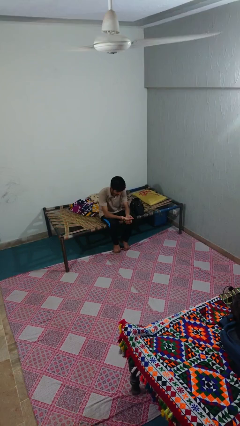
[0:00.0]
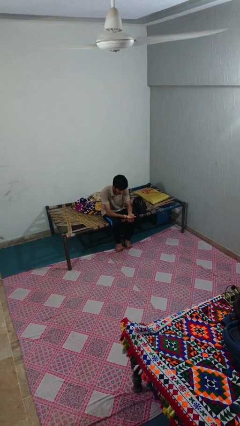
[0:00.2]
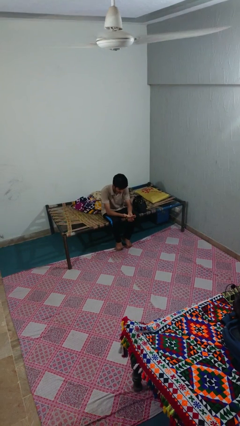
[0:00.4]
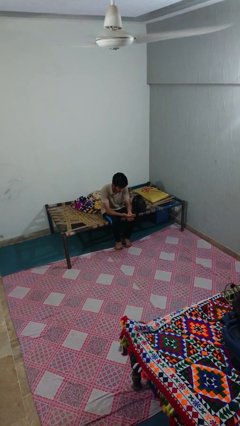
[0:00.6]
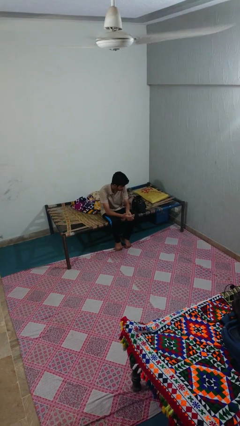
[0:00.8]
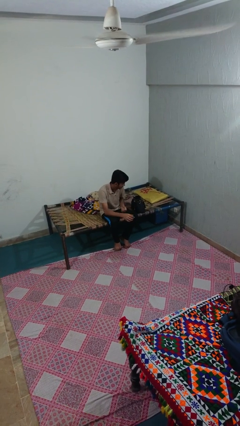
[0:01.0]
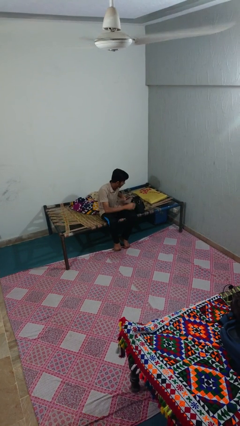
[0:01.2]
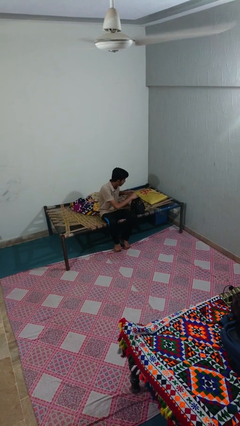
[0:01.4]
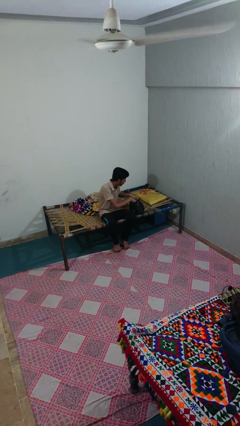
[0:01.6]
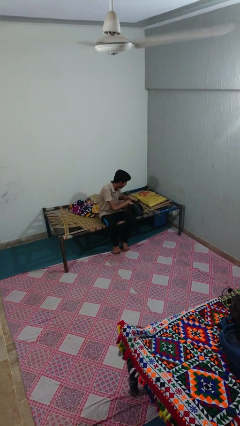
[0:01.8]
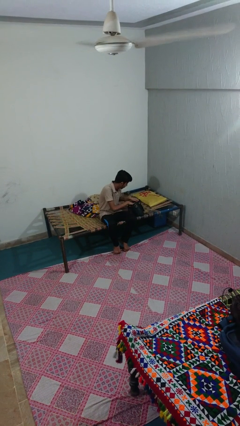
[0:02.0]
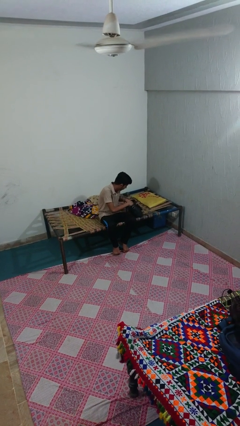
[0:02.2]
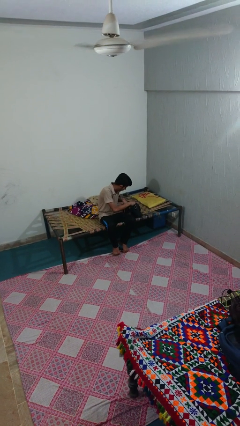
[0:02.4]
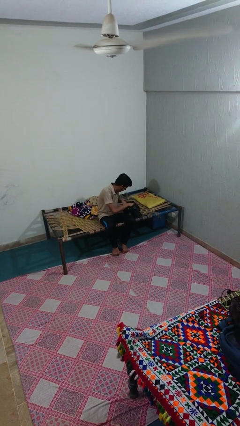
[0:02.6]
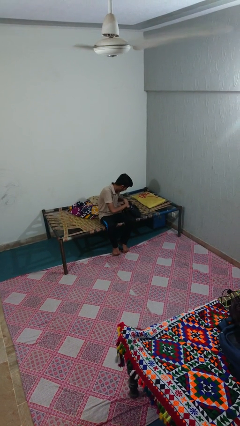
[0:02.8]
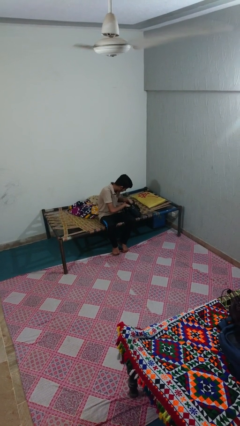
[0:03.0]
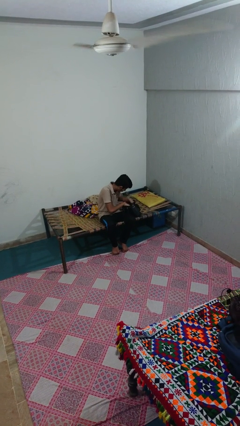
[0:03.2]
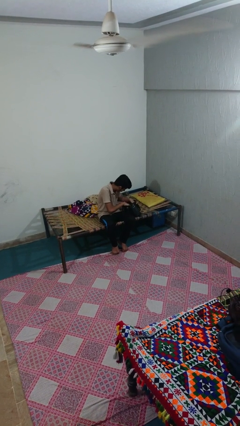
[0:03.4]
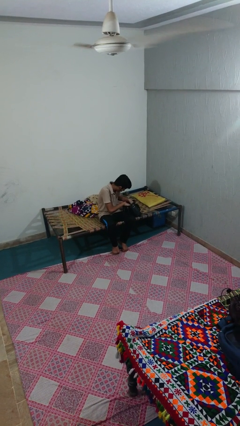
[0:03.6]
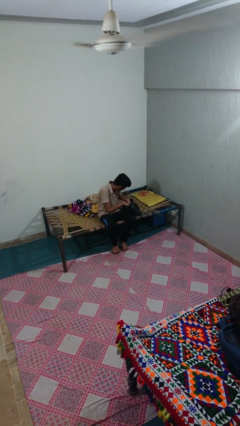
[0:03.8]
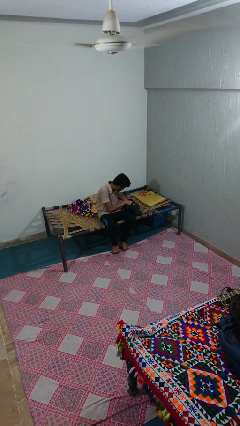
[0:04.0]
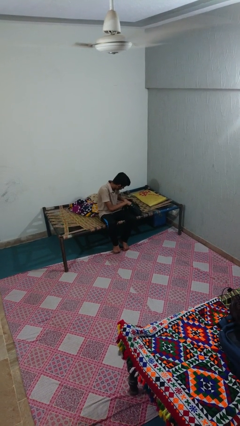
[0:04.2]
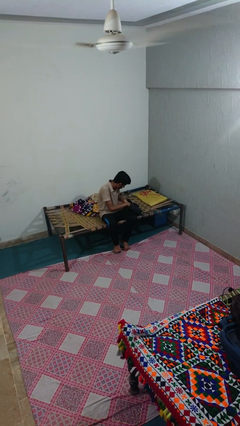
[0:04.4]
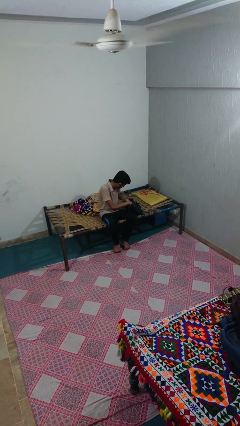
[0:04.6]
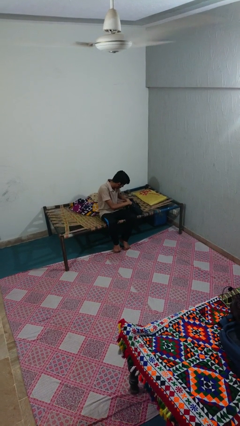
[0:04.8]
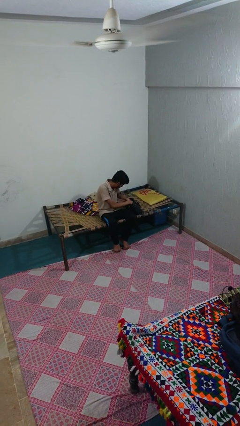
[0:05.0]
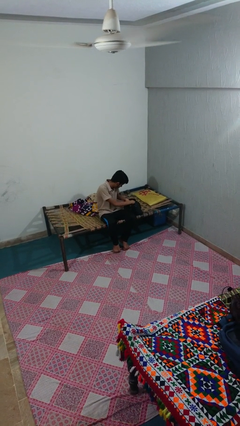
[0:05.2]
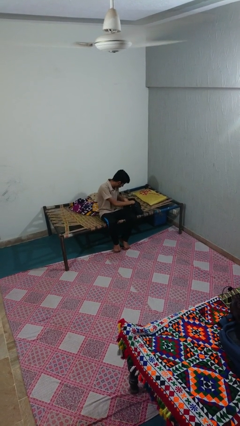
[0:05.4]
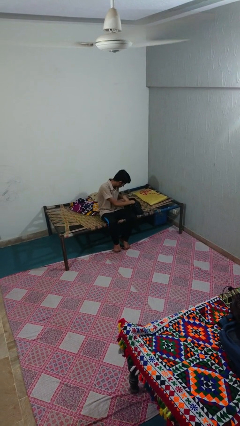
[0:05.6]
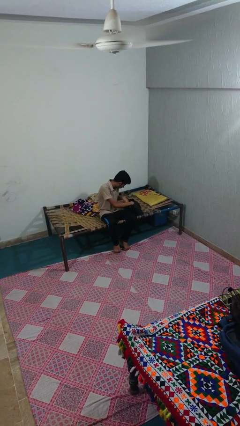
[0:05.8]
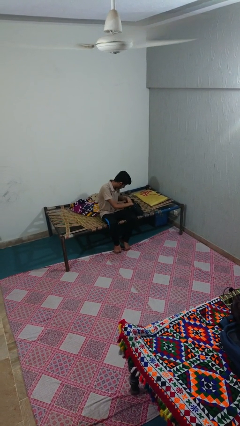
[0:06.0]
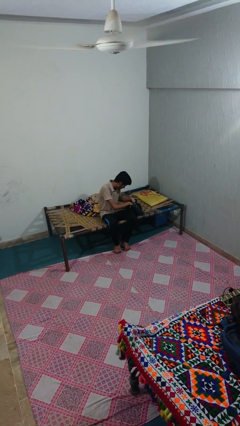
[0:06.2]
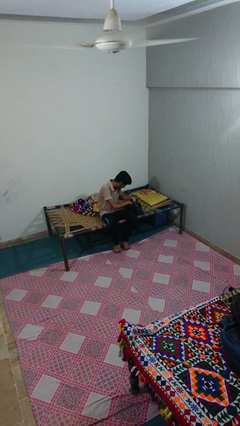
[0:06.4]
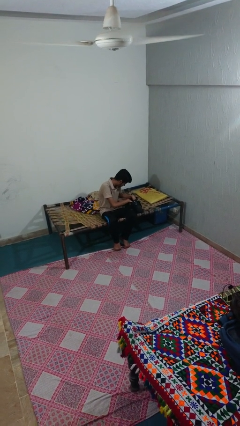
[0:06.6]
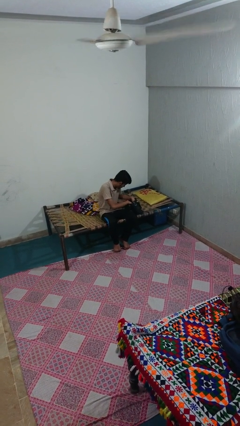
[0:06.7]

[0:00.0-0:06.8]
person searches in purse

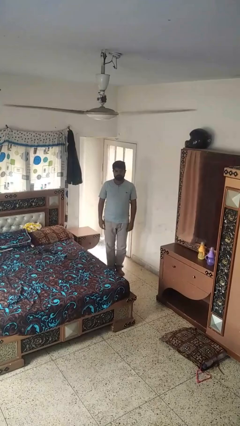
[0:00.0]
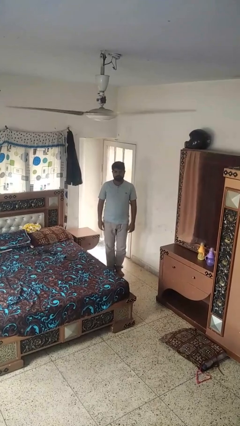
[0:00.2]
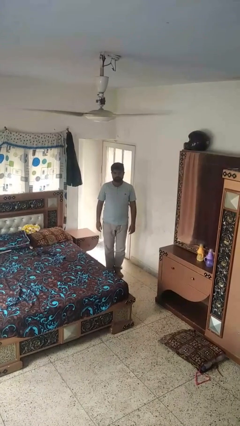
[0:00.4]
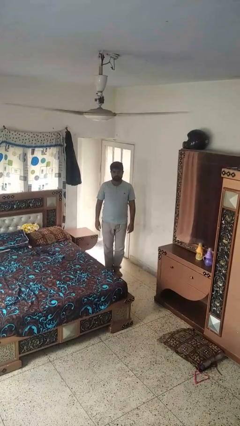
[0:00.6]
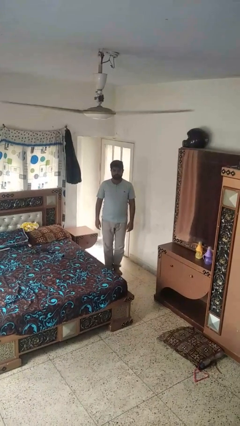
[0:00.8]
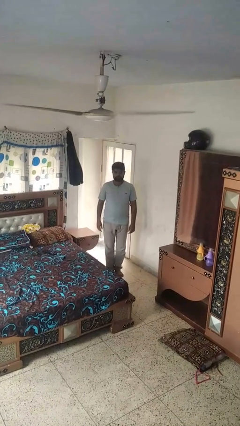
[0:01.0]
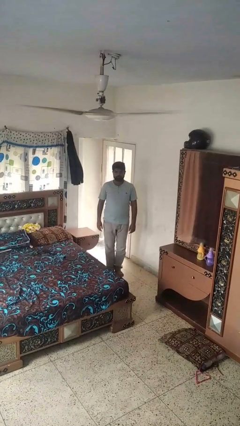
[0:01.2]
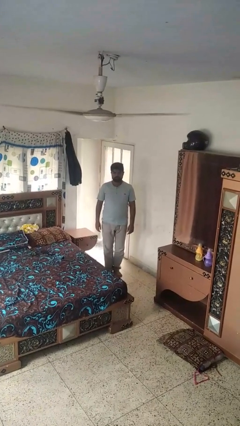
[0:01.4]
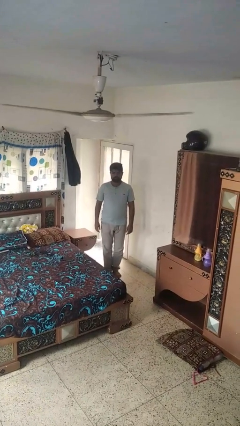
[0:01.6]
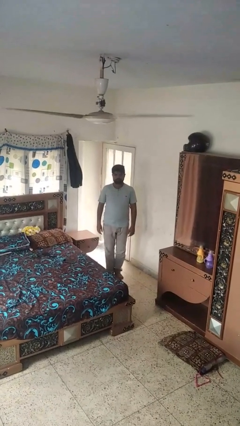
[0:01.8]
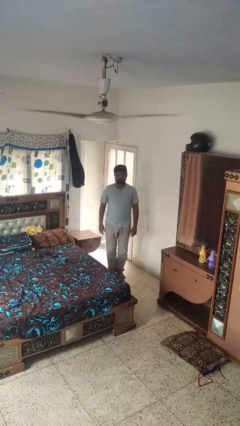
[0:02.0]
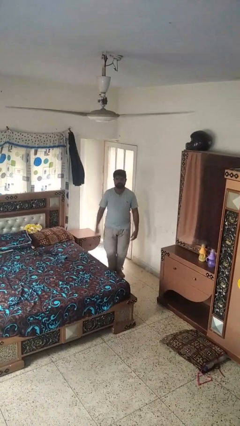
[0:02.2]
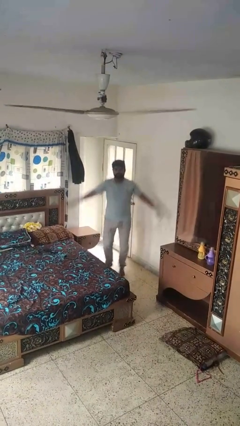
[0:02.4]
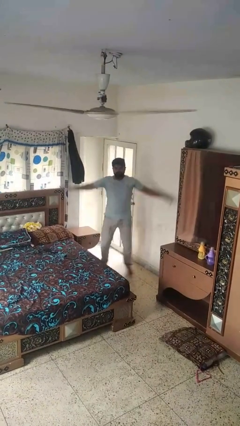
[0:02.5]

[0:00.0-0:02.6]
person exercises with jumping jacks

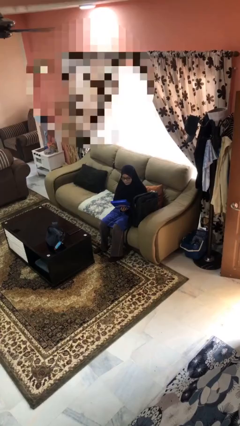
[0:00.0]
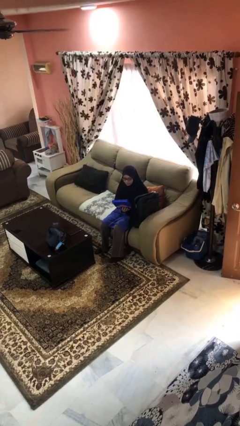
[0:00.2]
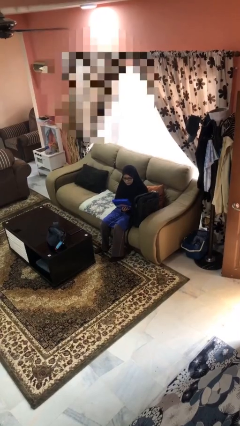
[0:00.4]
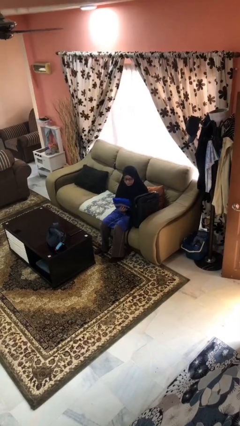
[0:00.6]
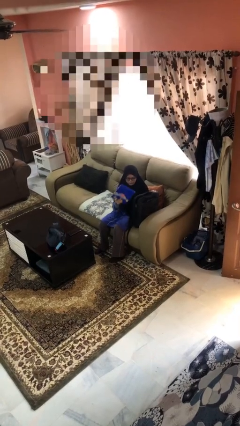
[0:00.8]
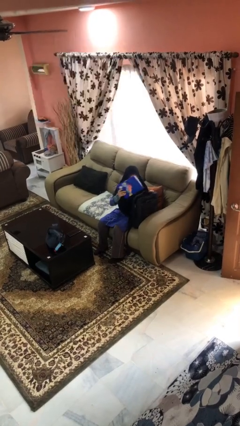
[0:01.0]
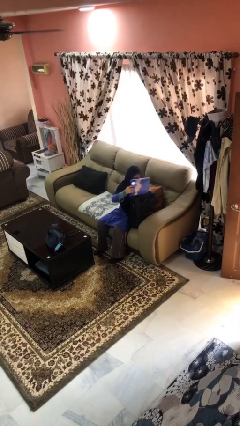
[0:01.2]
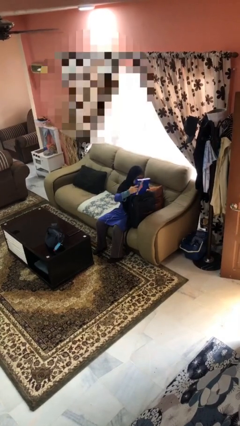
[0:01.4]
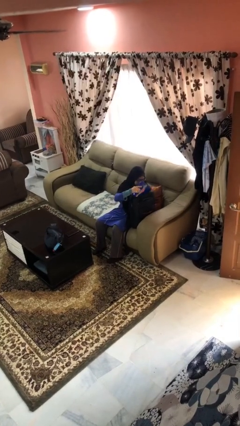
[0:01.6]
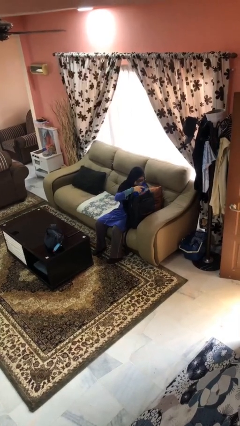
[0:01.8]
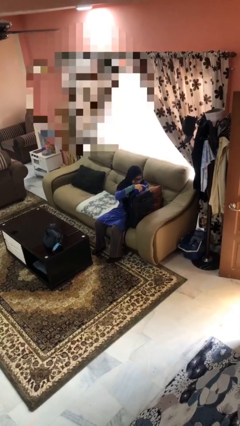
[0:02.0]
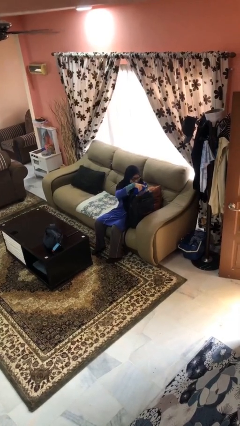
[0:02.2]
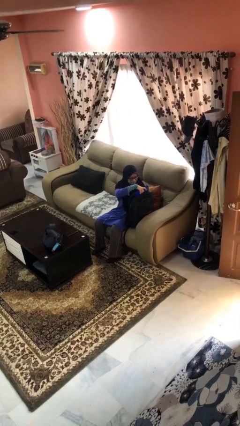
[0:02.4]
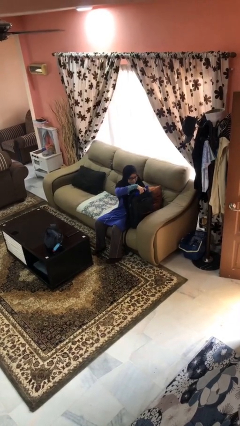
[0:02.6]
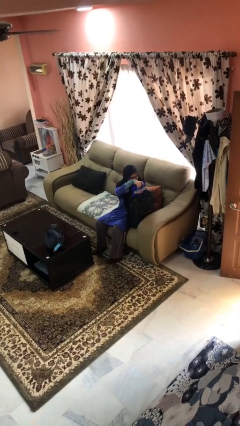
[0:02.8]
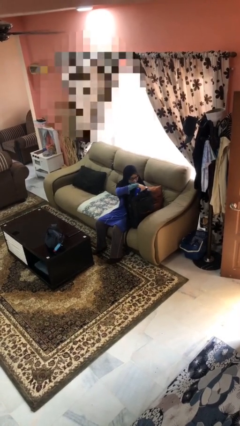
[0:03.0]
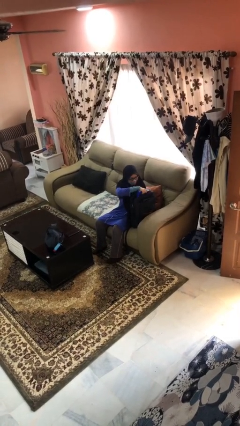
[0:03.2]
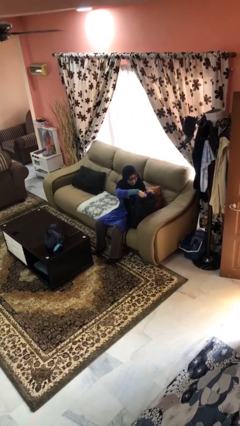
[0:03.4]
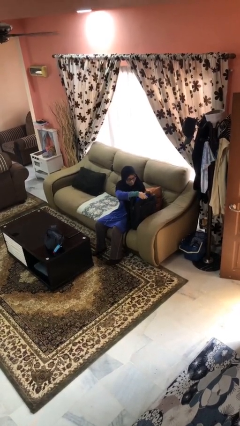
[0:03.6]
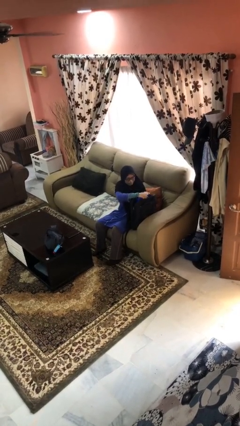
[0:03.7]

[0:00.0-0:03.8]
person puts object into backpack

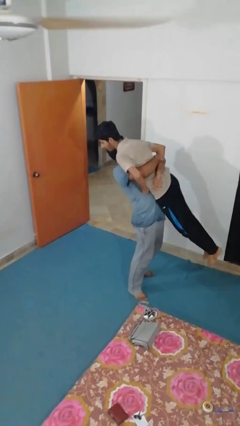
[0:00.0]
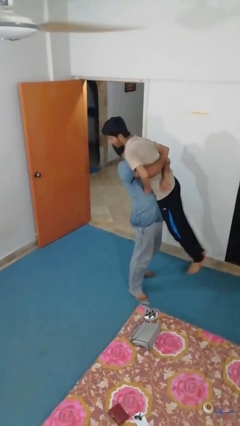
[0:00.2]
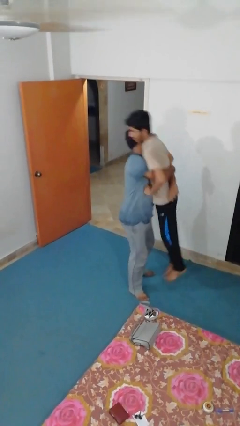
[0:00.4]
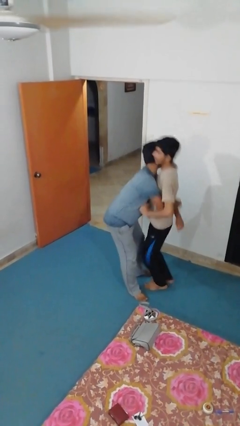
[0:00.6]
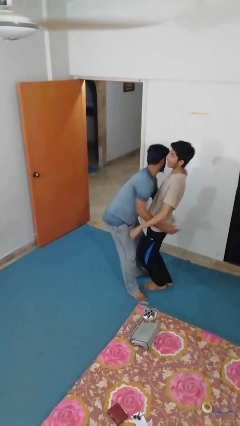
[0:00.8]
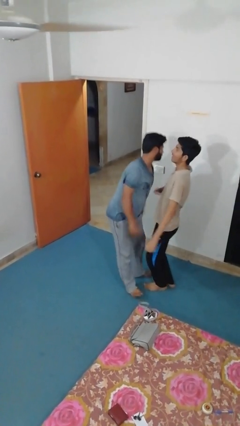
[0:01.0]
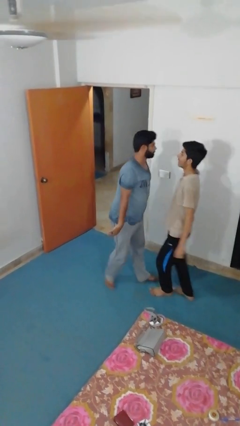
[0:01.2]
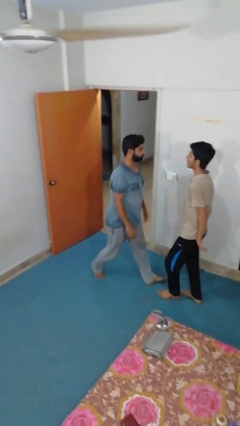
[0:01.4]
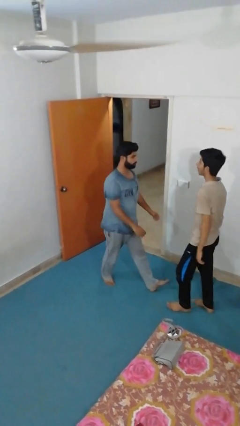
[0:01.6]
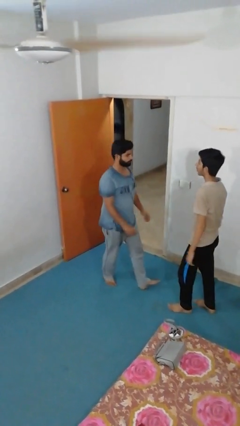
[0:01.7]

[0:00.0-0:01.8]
person puts down person

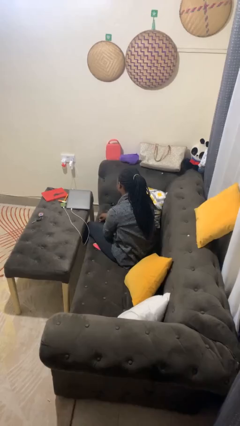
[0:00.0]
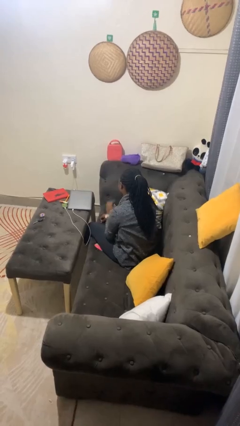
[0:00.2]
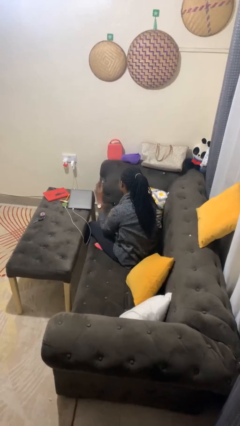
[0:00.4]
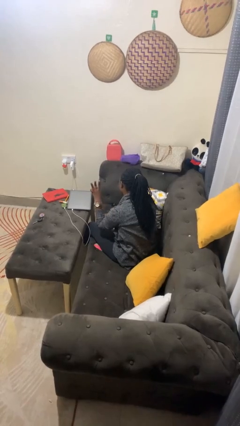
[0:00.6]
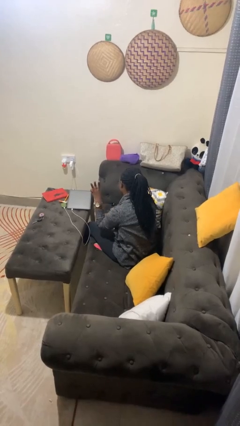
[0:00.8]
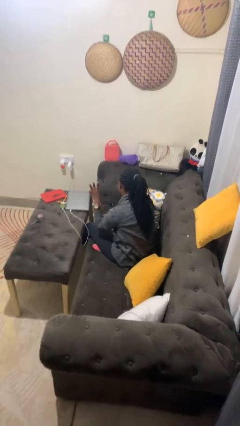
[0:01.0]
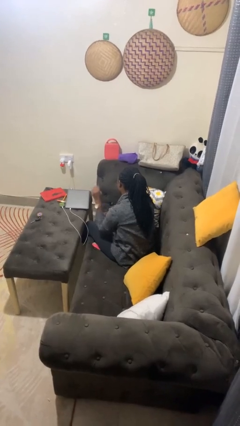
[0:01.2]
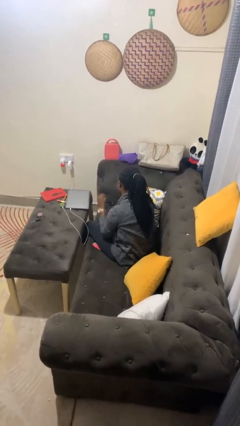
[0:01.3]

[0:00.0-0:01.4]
person gestures number three

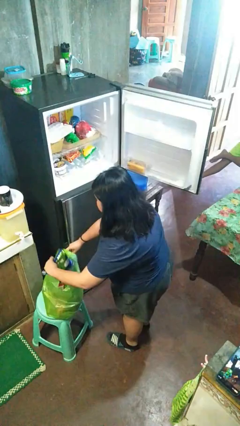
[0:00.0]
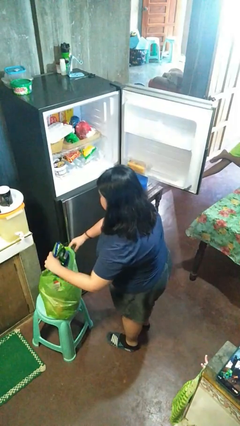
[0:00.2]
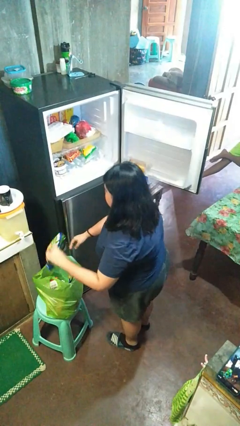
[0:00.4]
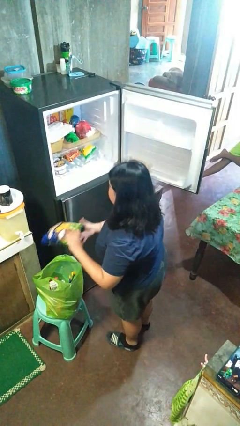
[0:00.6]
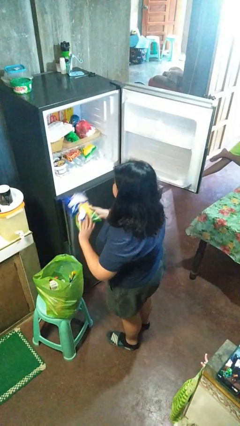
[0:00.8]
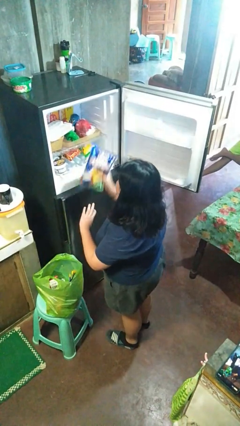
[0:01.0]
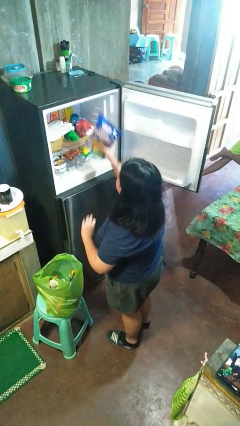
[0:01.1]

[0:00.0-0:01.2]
person loads groceries into refrigerator
